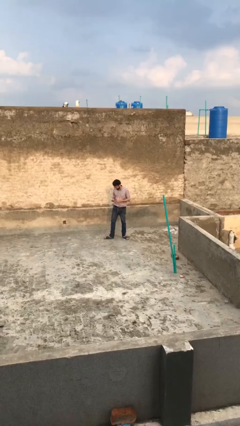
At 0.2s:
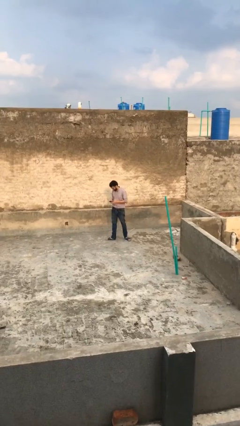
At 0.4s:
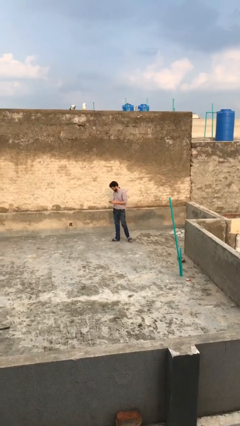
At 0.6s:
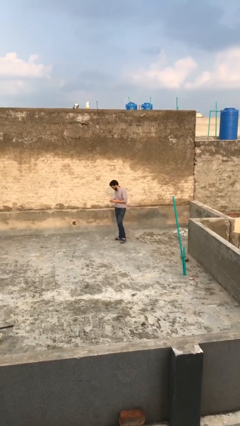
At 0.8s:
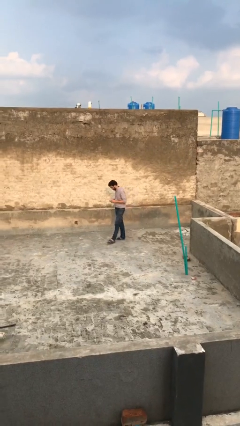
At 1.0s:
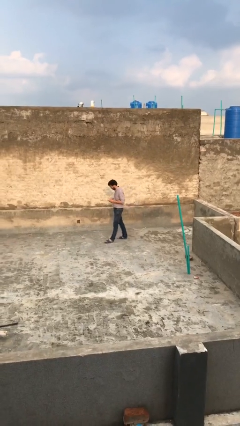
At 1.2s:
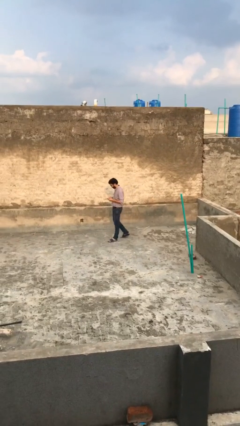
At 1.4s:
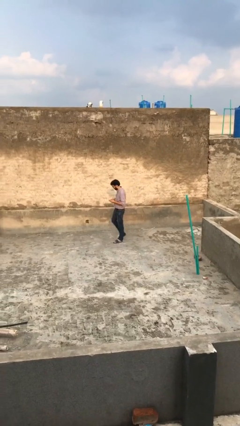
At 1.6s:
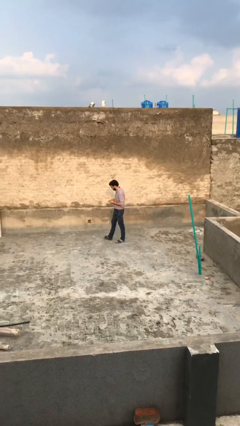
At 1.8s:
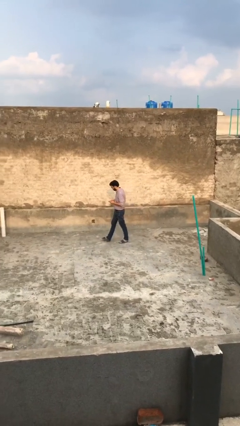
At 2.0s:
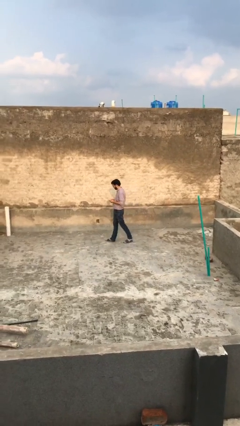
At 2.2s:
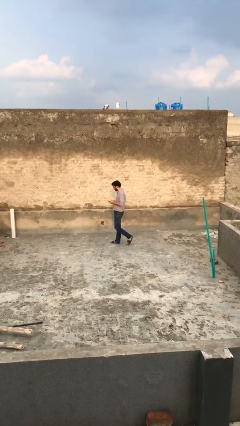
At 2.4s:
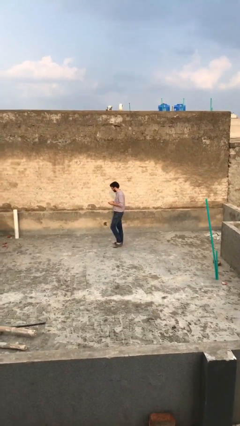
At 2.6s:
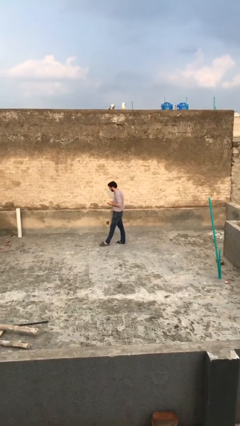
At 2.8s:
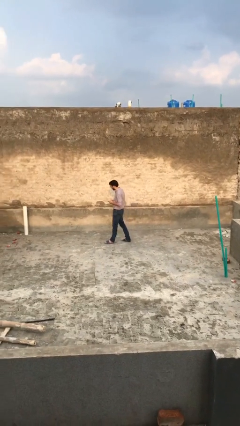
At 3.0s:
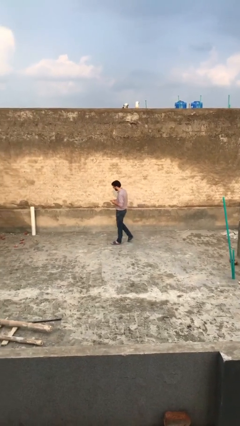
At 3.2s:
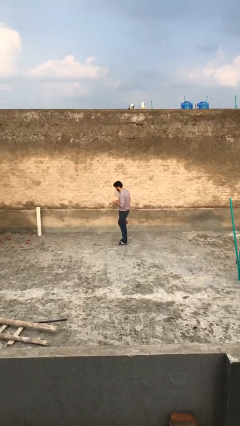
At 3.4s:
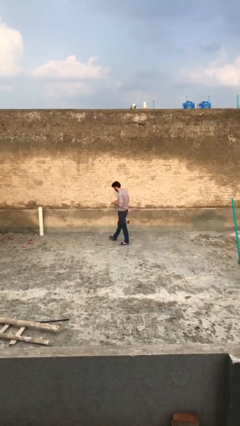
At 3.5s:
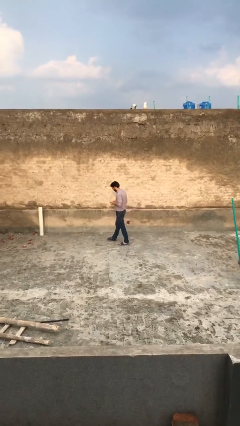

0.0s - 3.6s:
person texts on phone

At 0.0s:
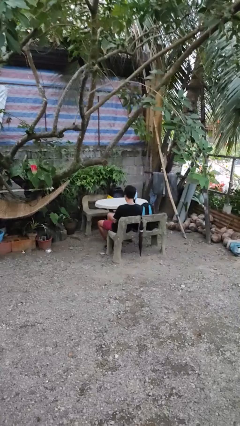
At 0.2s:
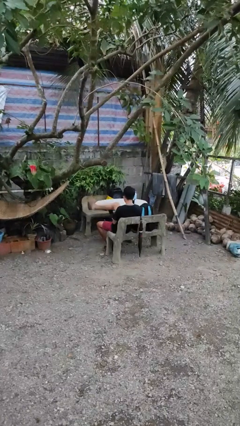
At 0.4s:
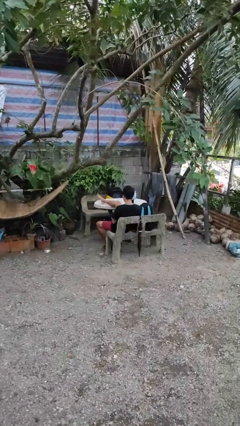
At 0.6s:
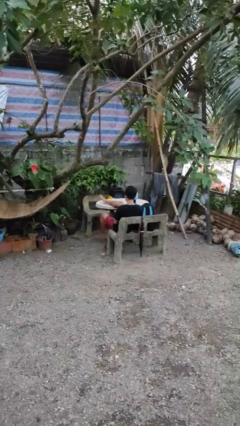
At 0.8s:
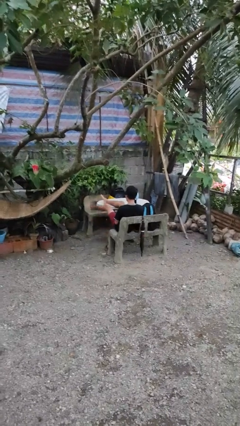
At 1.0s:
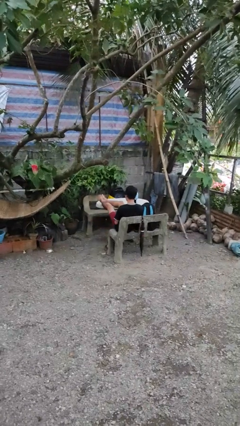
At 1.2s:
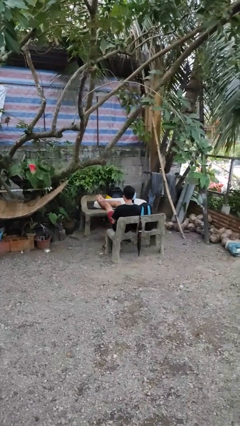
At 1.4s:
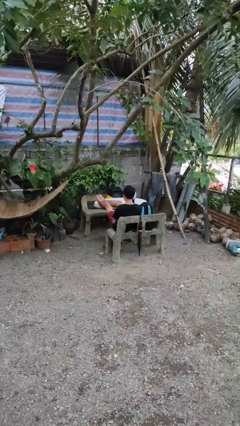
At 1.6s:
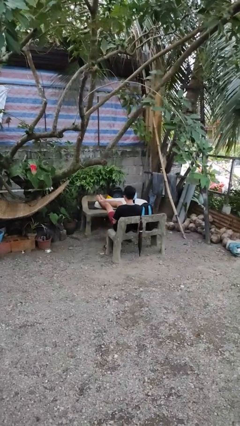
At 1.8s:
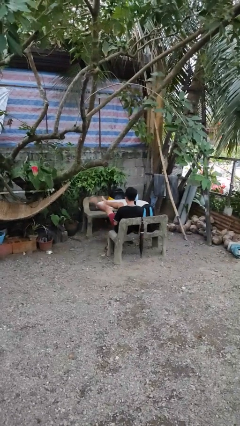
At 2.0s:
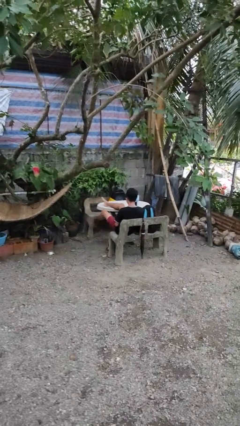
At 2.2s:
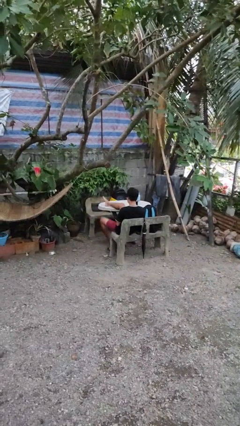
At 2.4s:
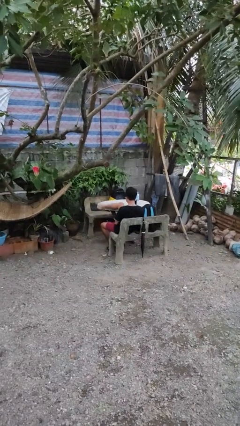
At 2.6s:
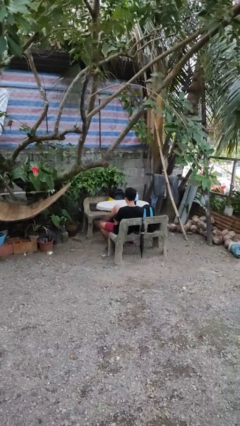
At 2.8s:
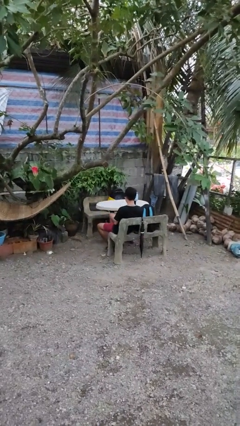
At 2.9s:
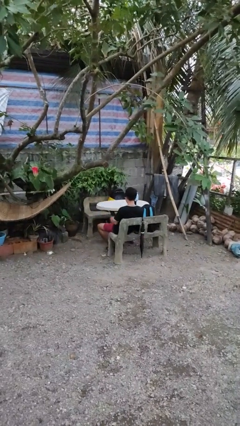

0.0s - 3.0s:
person puts feet up

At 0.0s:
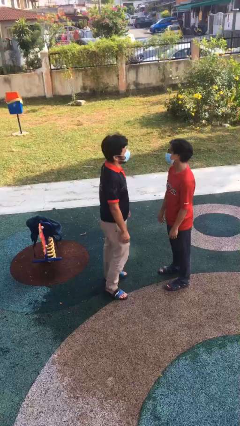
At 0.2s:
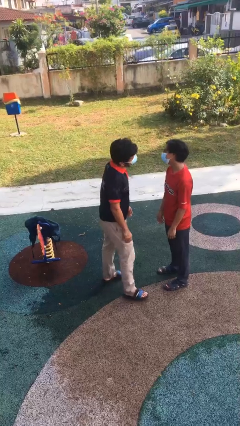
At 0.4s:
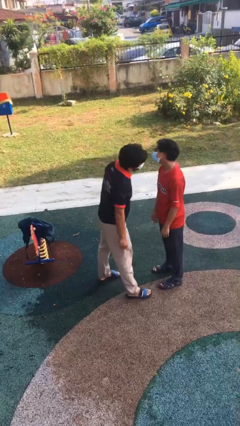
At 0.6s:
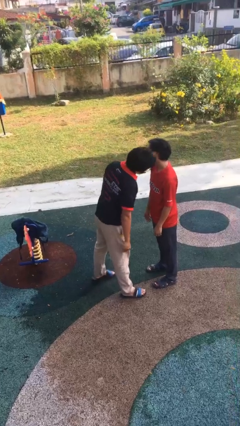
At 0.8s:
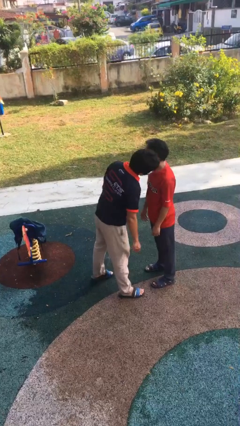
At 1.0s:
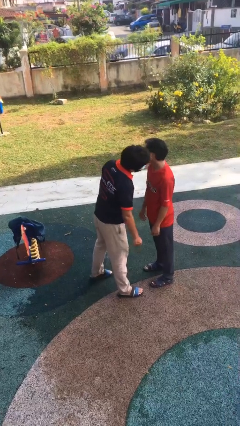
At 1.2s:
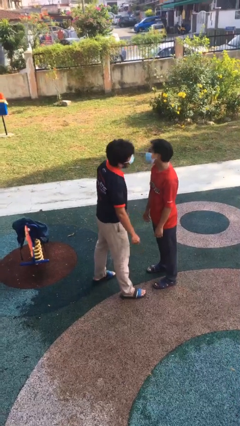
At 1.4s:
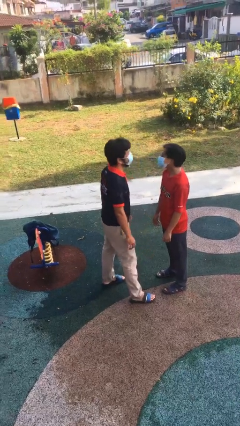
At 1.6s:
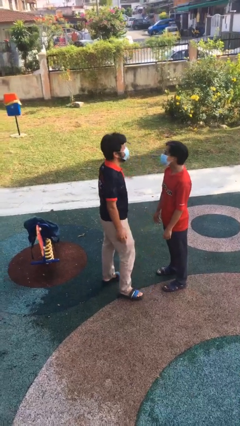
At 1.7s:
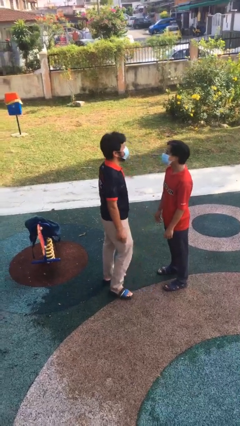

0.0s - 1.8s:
person kisses cheek of person

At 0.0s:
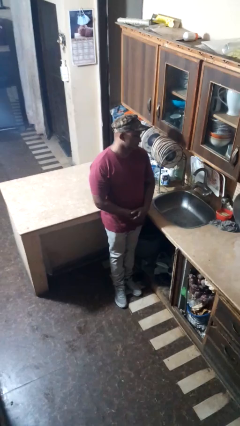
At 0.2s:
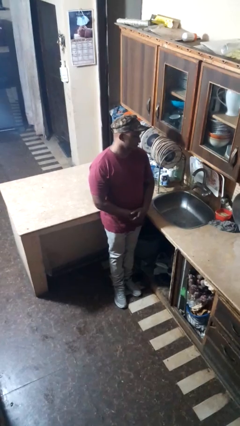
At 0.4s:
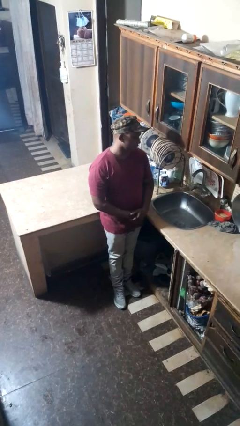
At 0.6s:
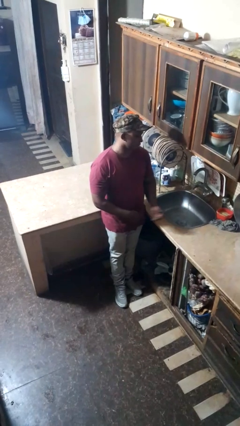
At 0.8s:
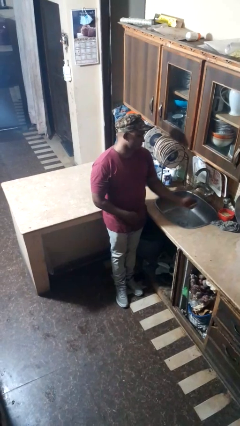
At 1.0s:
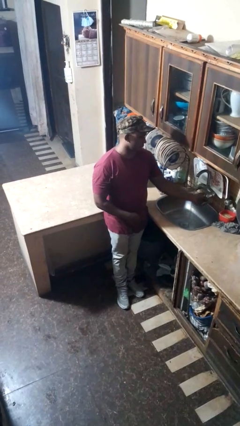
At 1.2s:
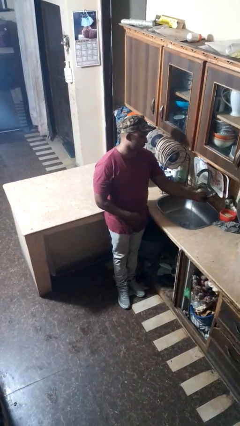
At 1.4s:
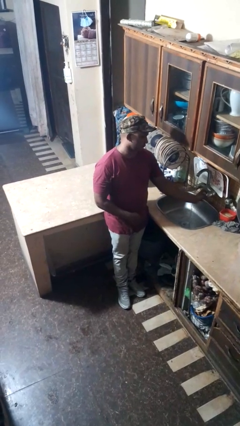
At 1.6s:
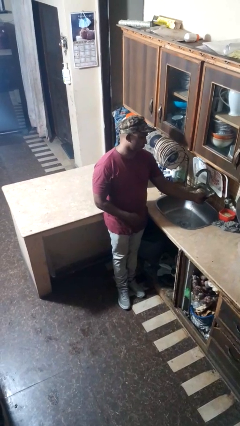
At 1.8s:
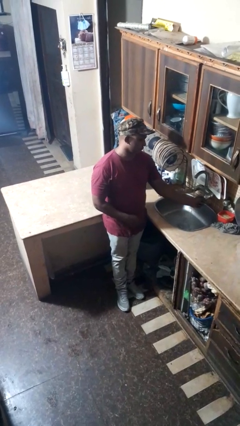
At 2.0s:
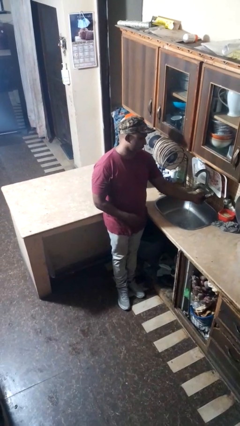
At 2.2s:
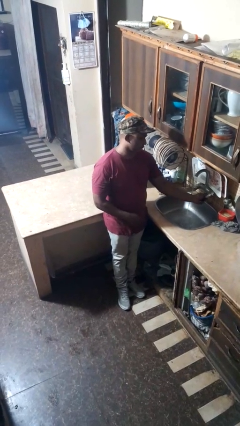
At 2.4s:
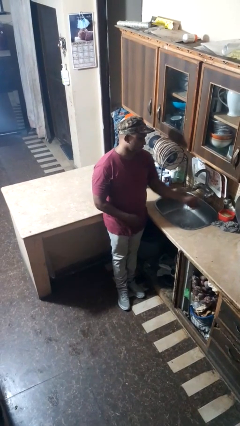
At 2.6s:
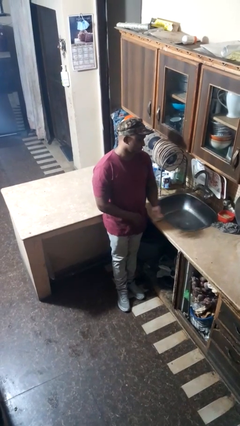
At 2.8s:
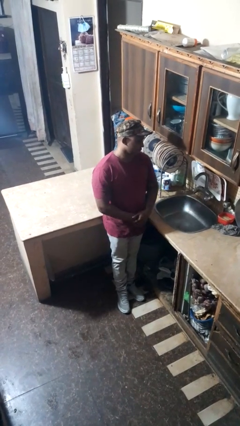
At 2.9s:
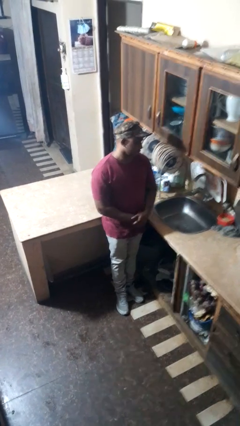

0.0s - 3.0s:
person turns off faucet

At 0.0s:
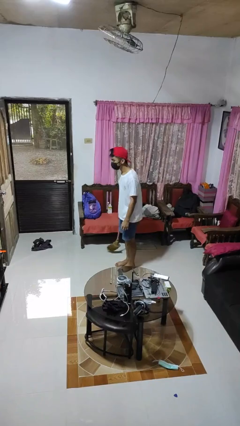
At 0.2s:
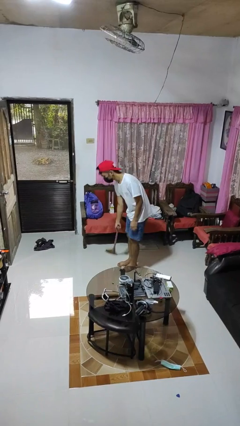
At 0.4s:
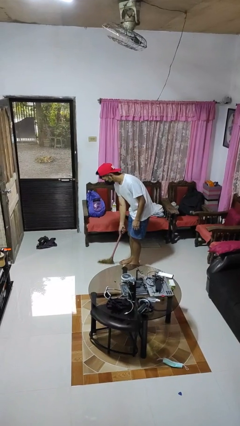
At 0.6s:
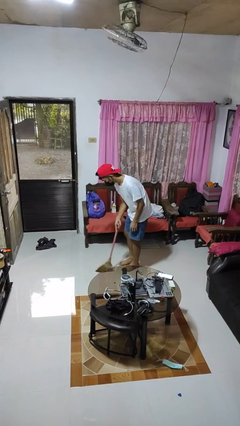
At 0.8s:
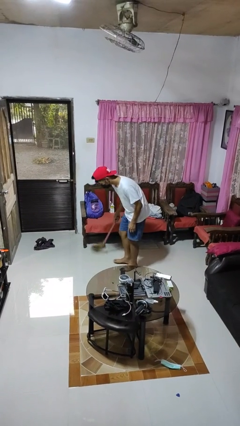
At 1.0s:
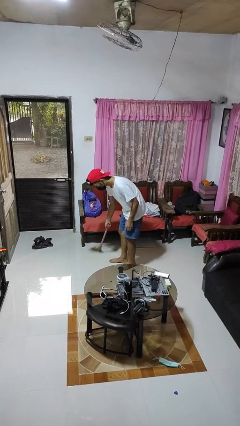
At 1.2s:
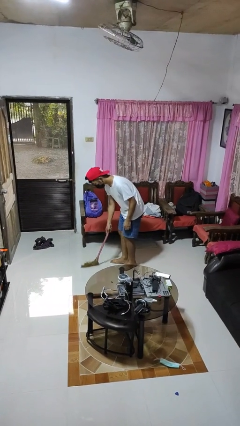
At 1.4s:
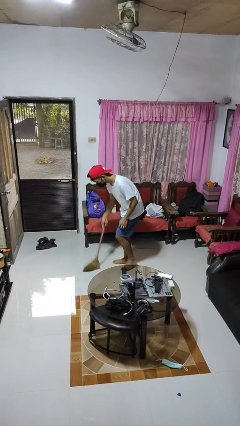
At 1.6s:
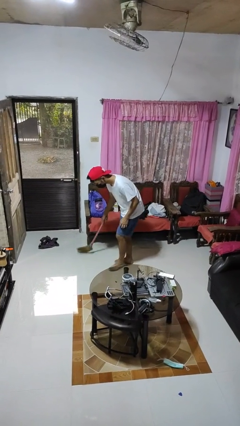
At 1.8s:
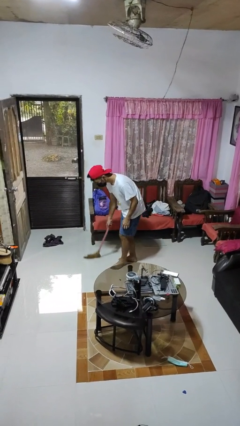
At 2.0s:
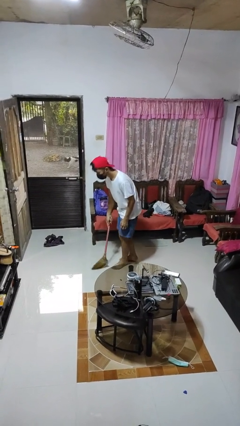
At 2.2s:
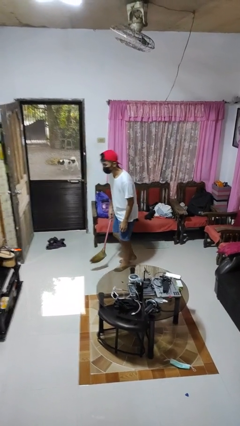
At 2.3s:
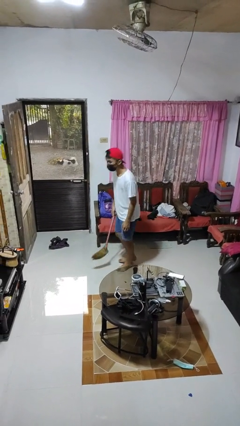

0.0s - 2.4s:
person sweeps floor

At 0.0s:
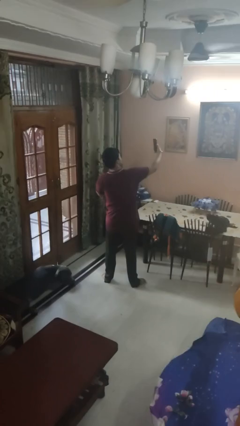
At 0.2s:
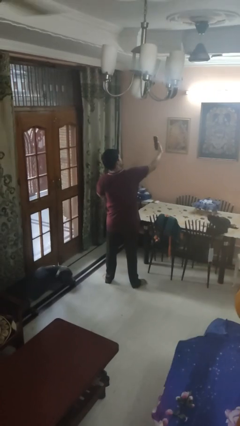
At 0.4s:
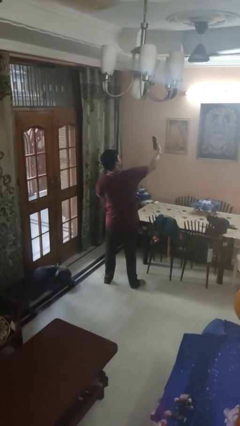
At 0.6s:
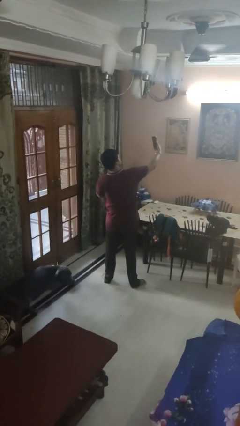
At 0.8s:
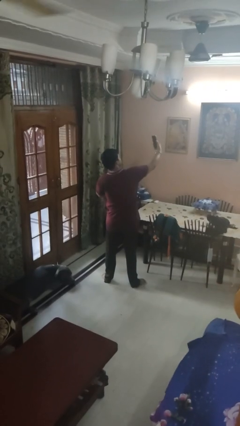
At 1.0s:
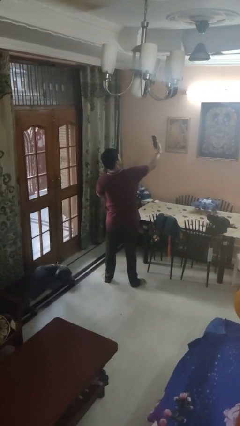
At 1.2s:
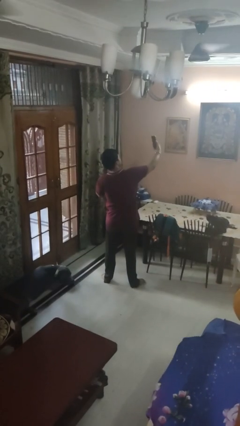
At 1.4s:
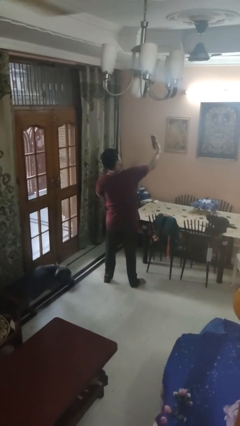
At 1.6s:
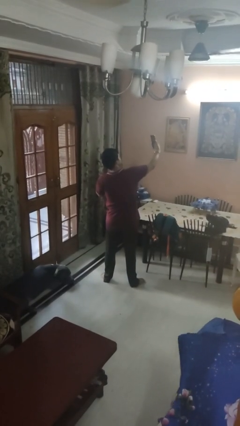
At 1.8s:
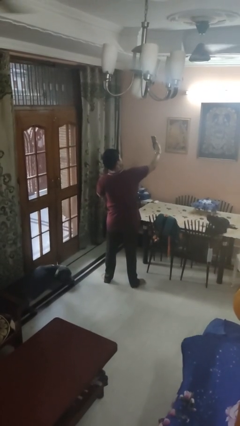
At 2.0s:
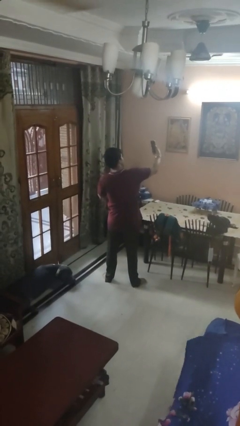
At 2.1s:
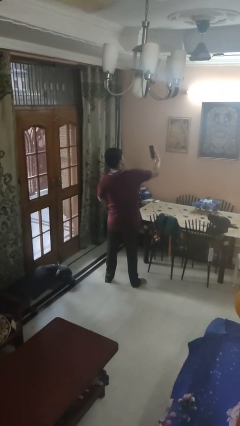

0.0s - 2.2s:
person takes selfie

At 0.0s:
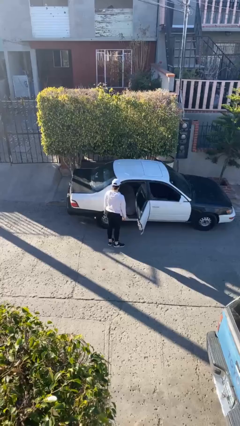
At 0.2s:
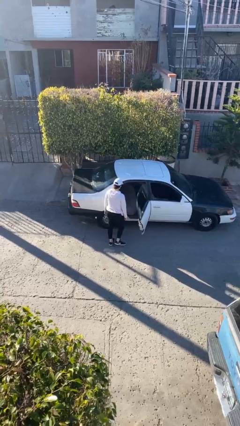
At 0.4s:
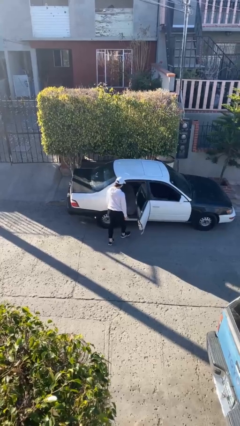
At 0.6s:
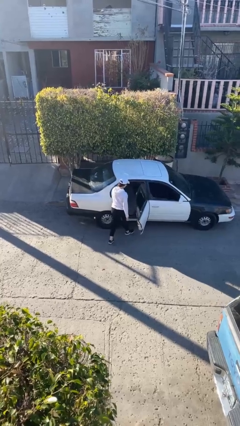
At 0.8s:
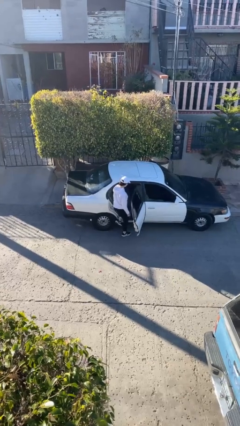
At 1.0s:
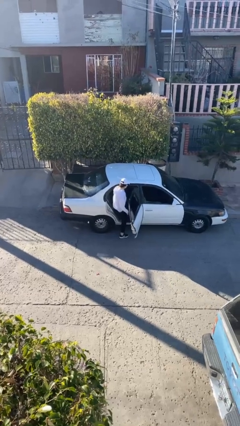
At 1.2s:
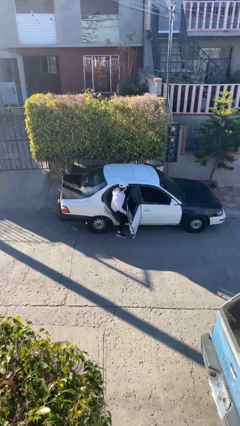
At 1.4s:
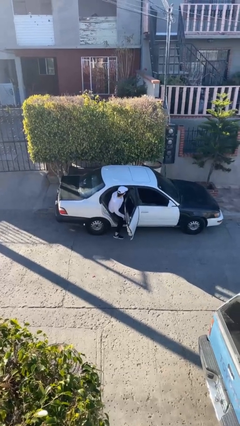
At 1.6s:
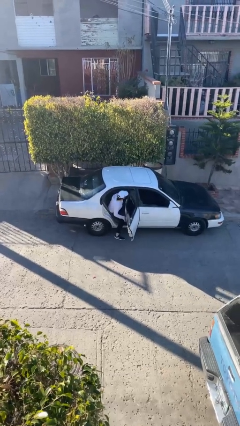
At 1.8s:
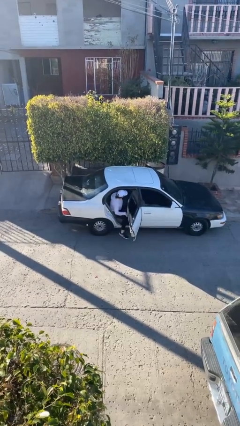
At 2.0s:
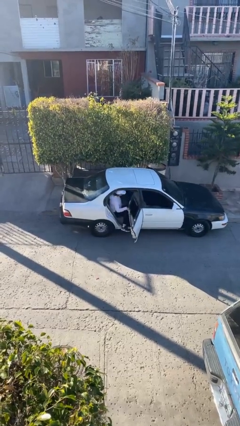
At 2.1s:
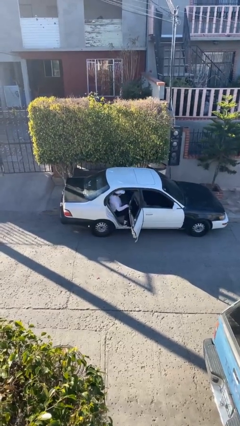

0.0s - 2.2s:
person enters car
